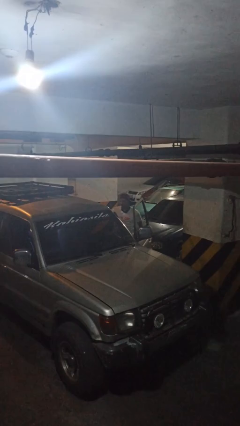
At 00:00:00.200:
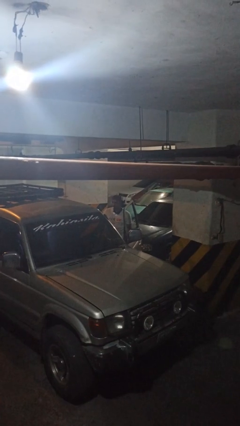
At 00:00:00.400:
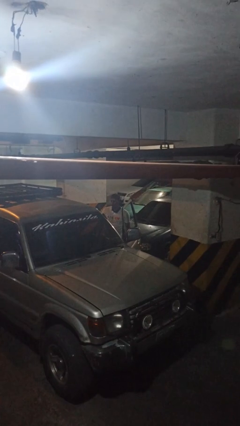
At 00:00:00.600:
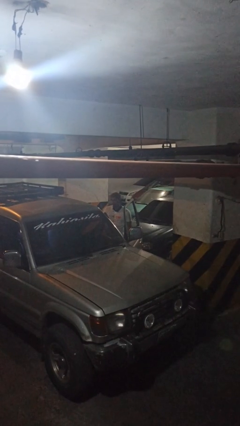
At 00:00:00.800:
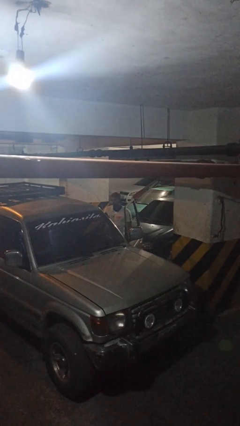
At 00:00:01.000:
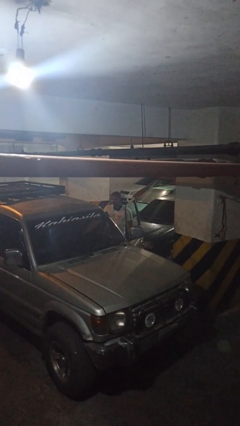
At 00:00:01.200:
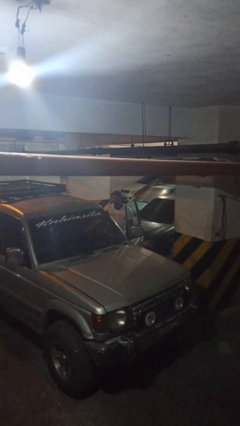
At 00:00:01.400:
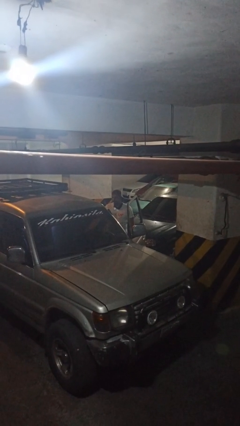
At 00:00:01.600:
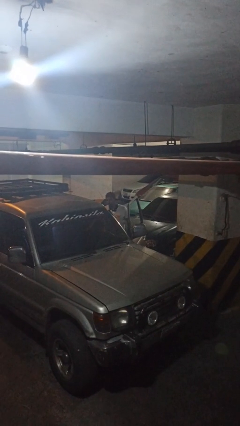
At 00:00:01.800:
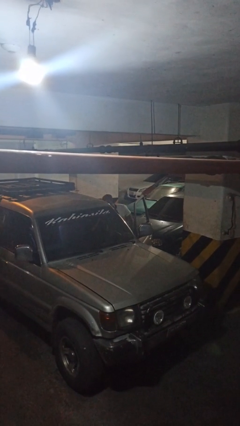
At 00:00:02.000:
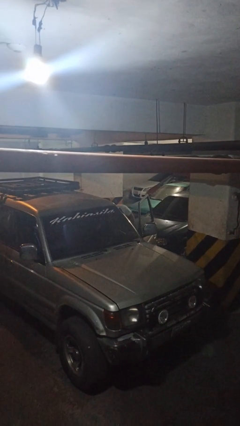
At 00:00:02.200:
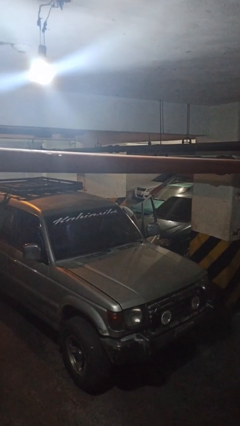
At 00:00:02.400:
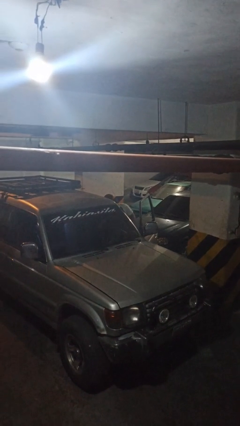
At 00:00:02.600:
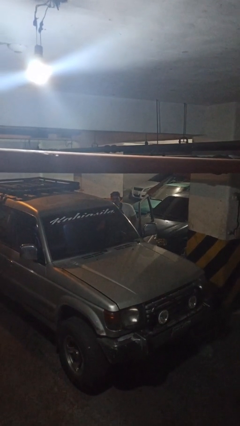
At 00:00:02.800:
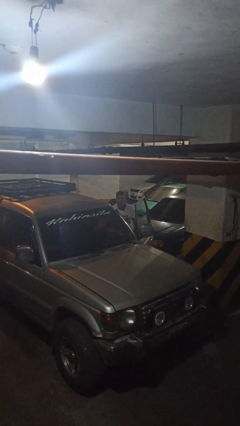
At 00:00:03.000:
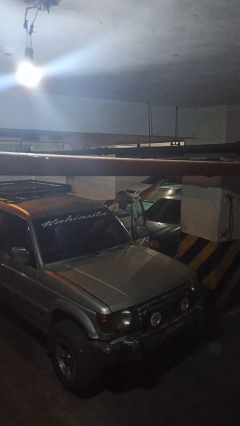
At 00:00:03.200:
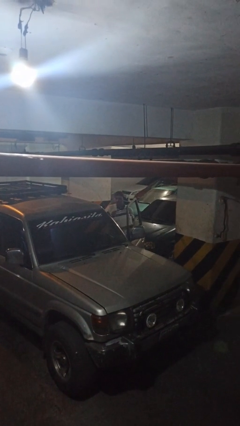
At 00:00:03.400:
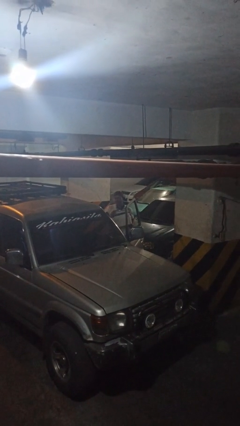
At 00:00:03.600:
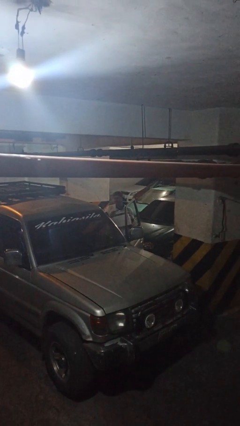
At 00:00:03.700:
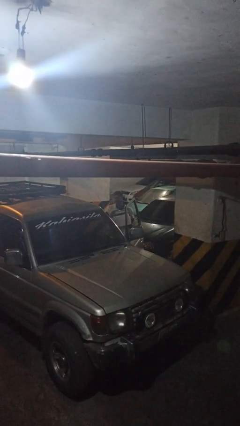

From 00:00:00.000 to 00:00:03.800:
person unloads car

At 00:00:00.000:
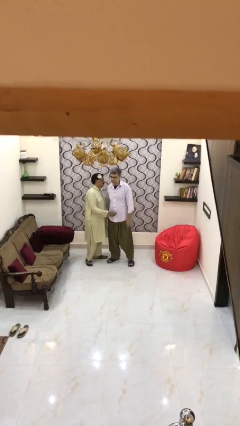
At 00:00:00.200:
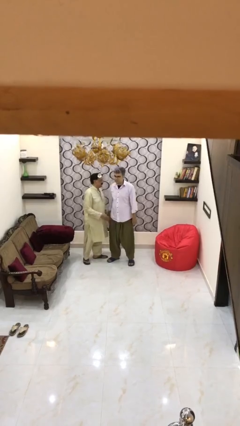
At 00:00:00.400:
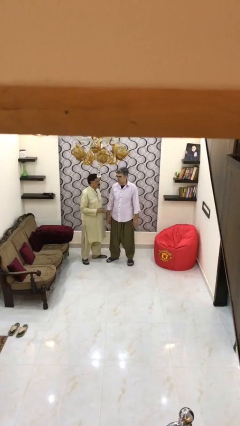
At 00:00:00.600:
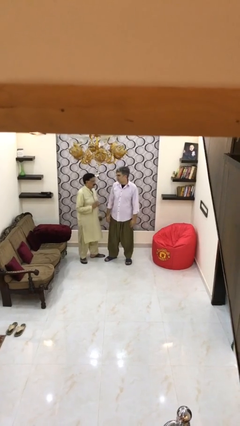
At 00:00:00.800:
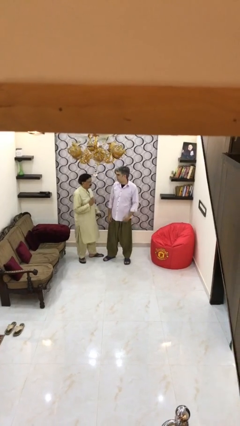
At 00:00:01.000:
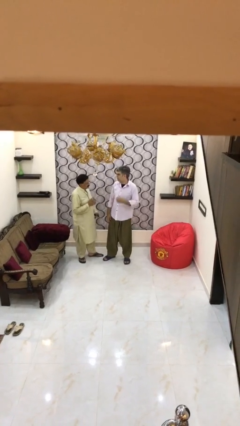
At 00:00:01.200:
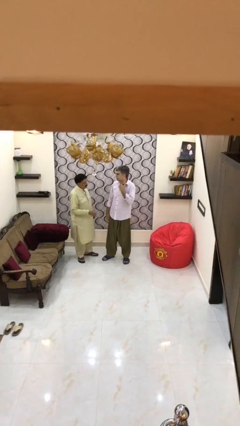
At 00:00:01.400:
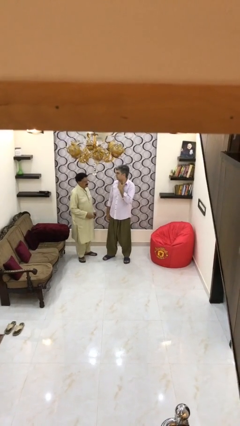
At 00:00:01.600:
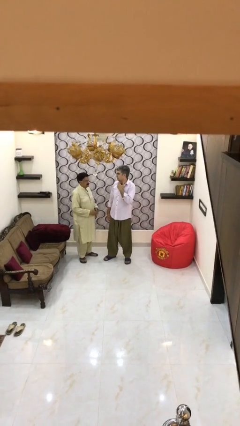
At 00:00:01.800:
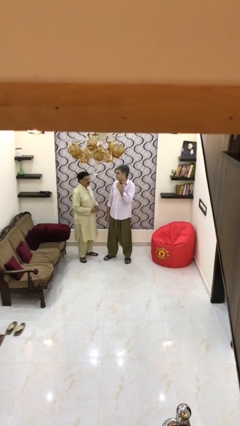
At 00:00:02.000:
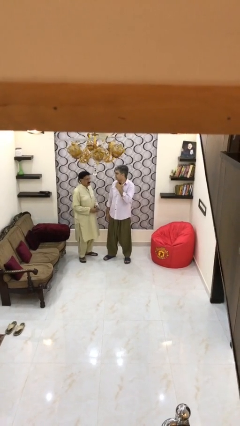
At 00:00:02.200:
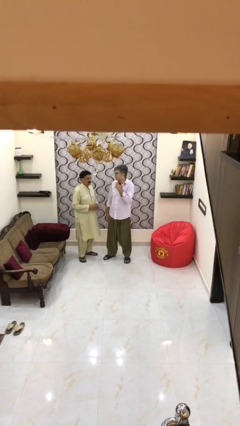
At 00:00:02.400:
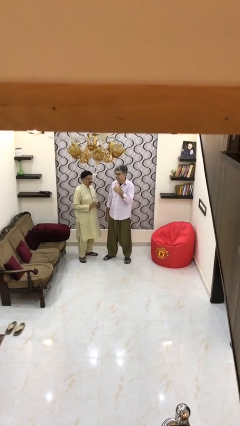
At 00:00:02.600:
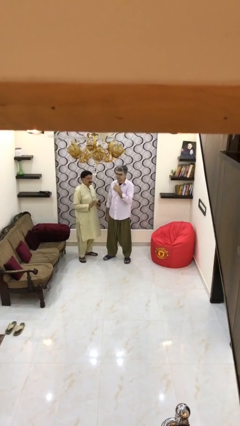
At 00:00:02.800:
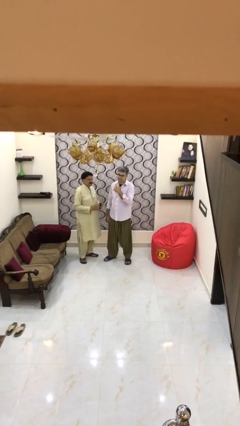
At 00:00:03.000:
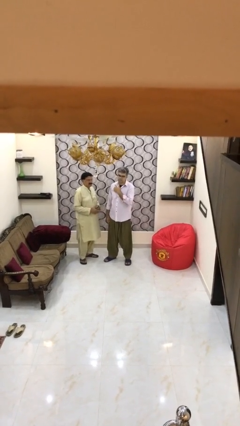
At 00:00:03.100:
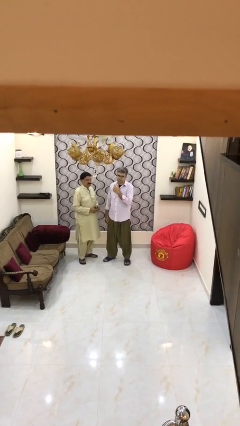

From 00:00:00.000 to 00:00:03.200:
person talks to person

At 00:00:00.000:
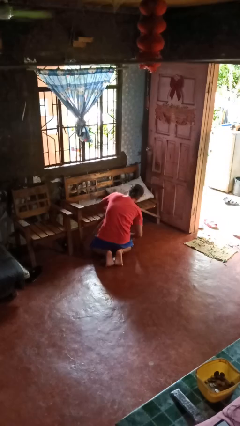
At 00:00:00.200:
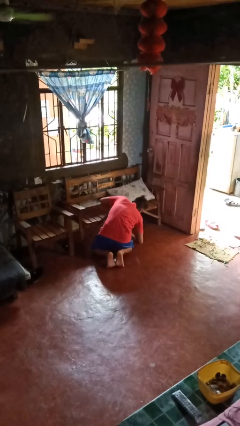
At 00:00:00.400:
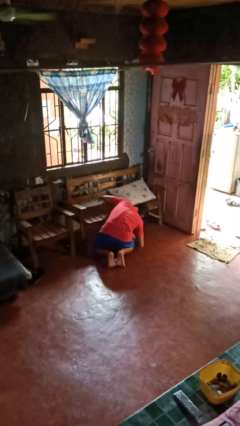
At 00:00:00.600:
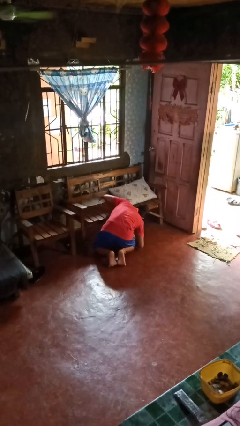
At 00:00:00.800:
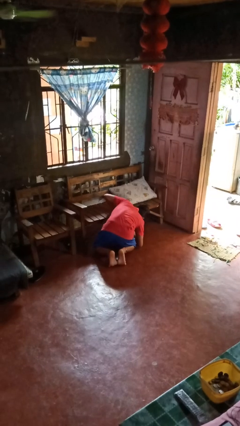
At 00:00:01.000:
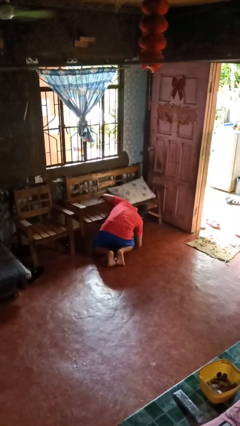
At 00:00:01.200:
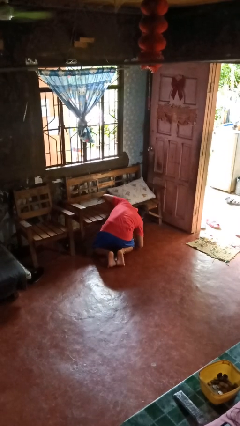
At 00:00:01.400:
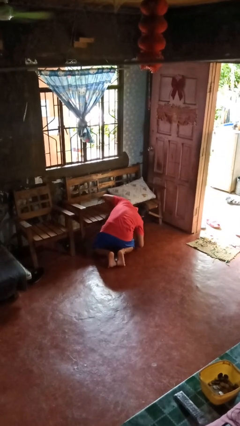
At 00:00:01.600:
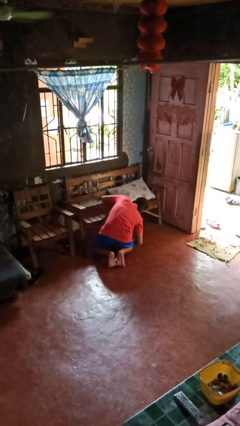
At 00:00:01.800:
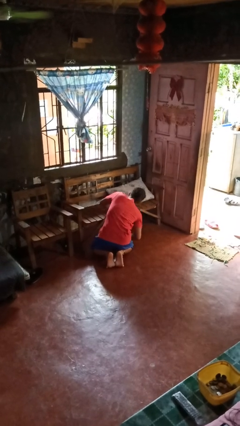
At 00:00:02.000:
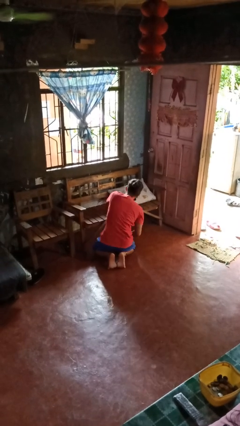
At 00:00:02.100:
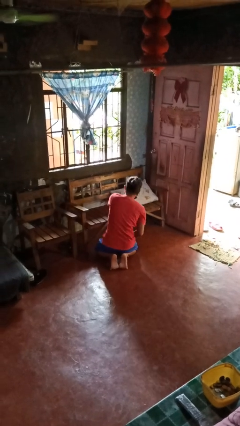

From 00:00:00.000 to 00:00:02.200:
person searches in couch

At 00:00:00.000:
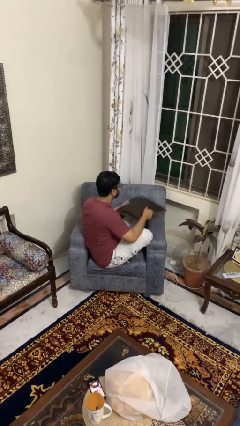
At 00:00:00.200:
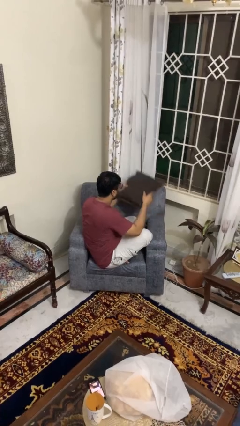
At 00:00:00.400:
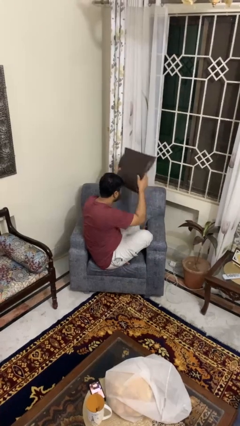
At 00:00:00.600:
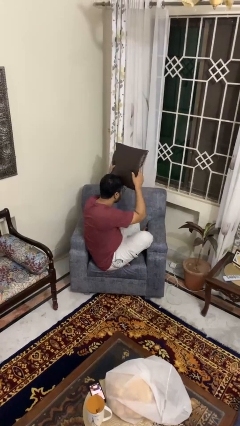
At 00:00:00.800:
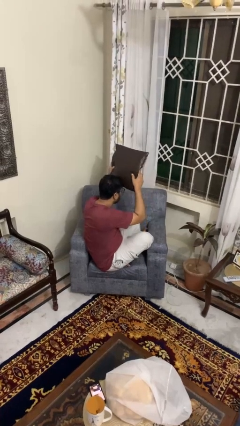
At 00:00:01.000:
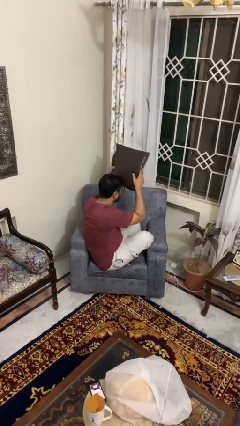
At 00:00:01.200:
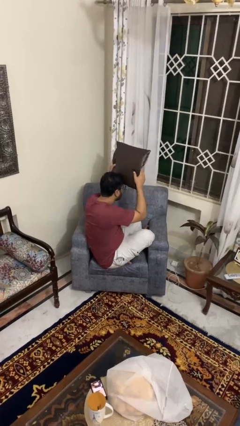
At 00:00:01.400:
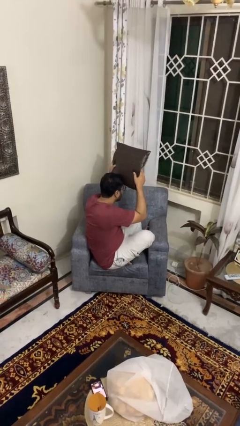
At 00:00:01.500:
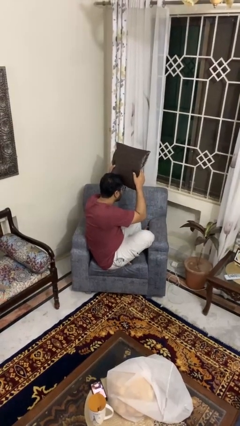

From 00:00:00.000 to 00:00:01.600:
person holds object above head

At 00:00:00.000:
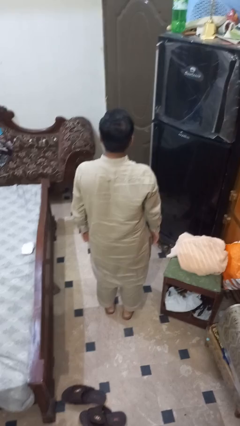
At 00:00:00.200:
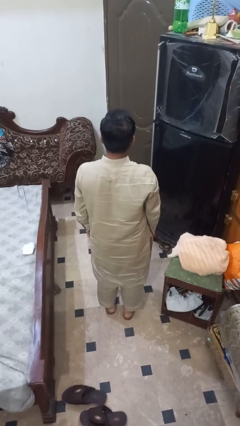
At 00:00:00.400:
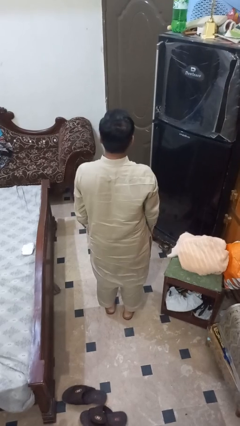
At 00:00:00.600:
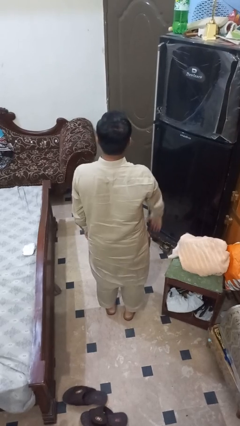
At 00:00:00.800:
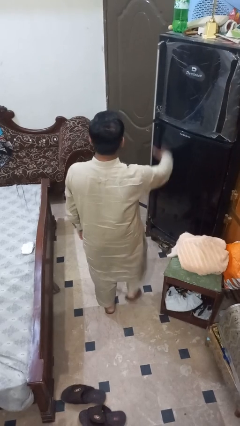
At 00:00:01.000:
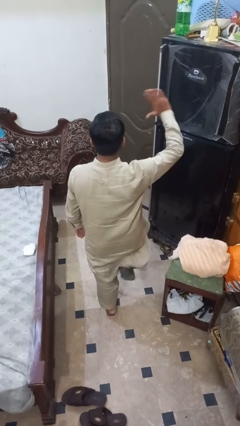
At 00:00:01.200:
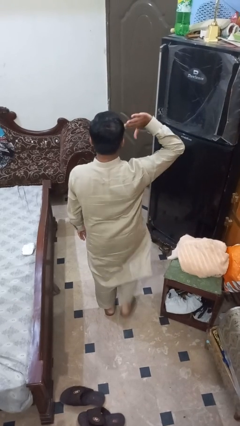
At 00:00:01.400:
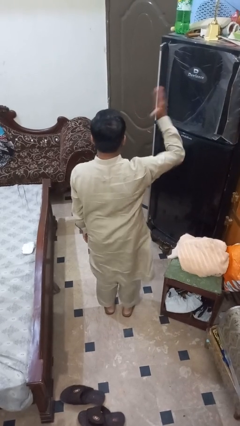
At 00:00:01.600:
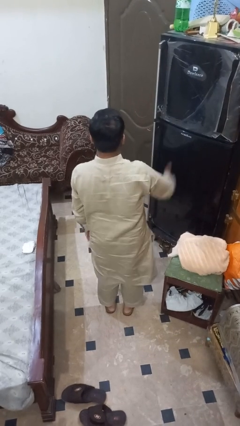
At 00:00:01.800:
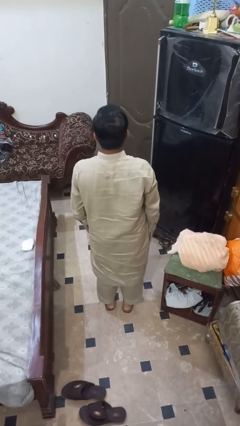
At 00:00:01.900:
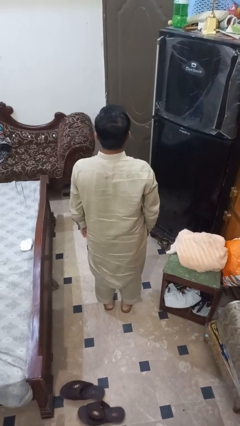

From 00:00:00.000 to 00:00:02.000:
person salutes

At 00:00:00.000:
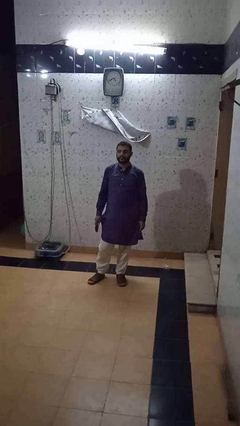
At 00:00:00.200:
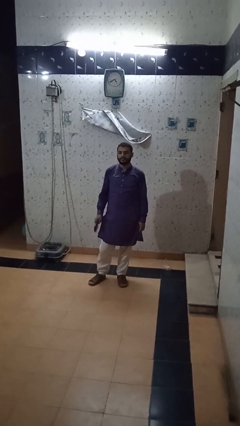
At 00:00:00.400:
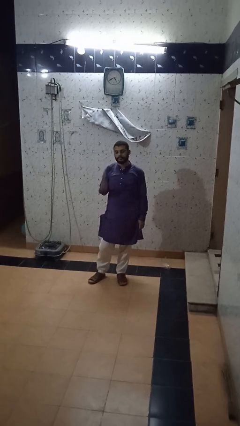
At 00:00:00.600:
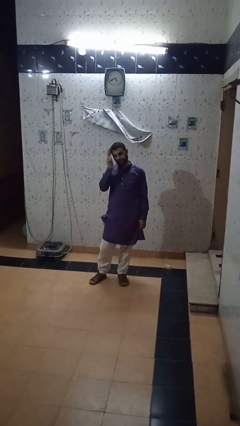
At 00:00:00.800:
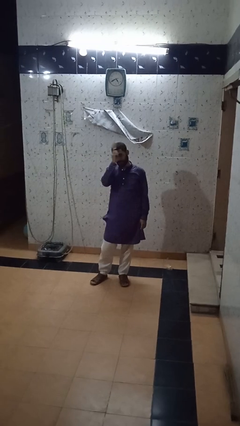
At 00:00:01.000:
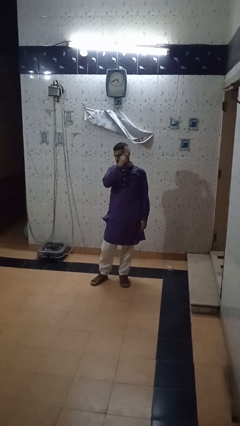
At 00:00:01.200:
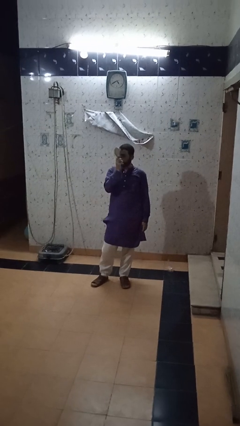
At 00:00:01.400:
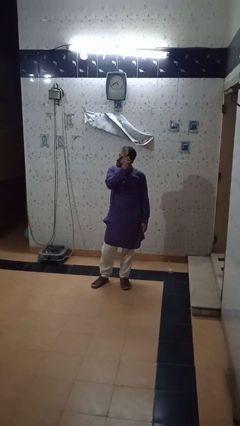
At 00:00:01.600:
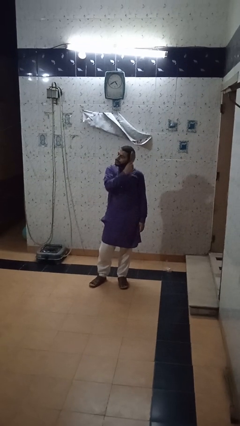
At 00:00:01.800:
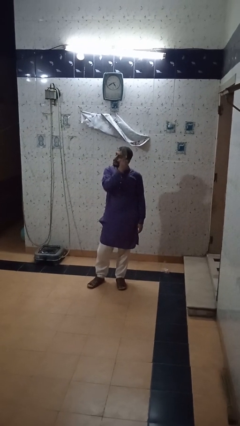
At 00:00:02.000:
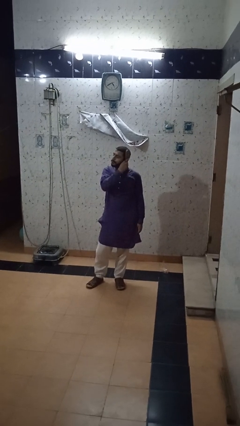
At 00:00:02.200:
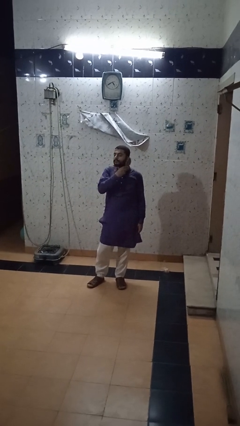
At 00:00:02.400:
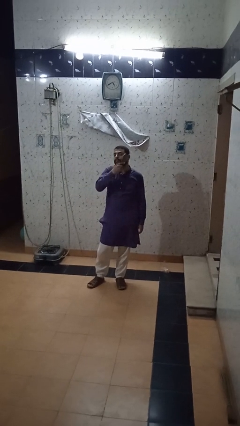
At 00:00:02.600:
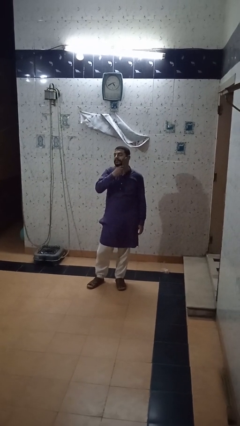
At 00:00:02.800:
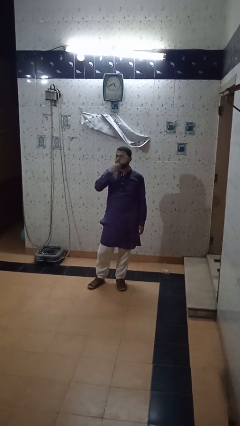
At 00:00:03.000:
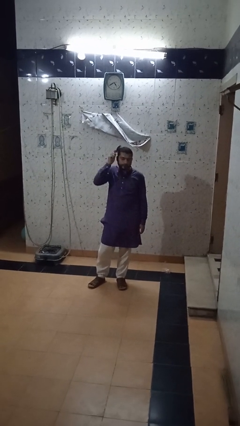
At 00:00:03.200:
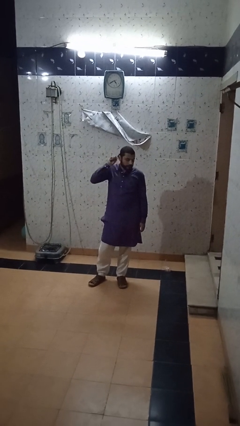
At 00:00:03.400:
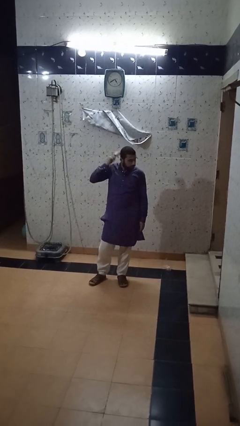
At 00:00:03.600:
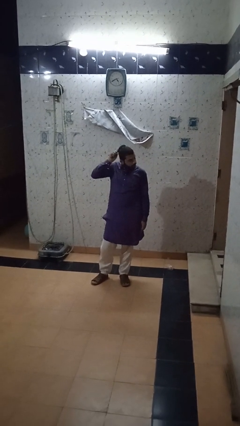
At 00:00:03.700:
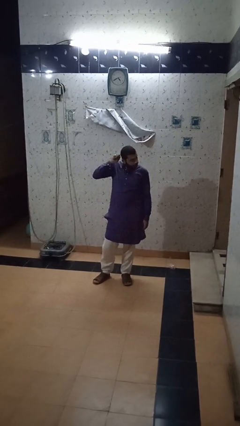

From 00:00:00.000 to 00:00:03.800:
person brushes hair

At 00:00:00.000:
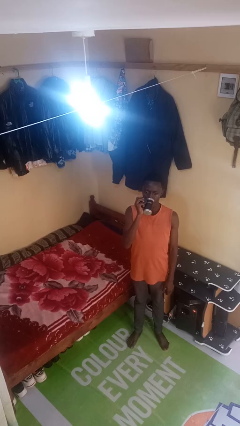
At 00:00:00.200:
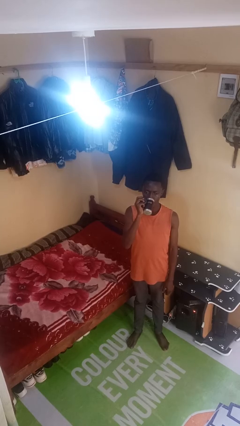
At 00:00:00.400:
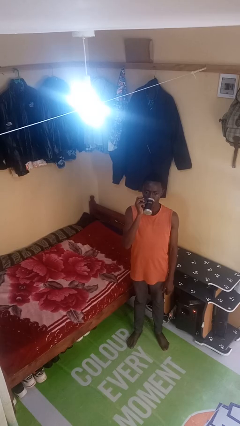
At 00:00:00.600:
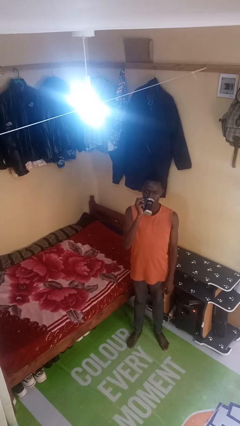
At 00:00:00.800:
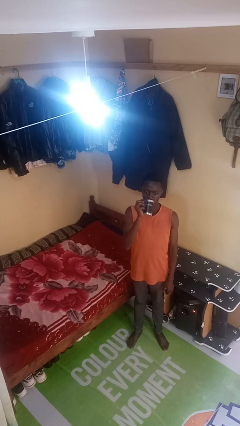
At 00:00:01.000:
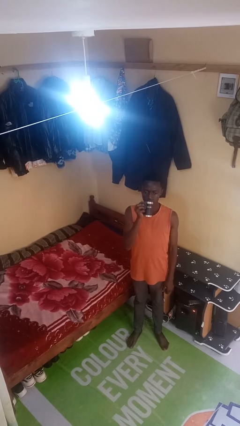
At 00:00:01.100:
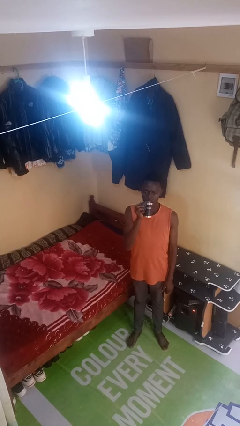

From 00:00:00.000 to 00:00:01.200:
person drinks from beverage can
